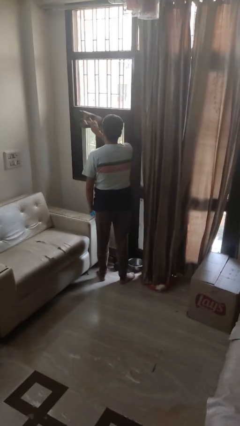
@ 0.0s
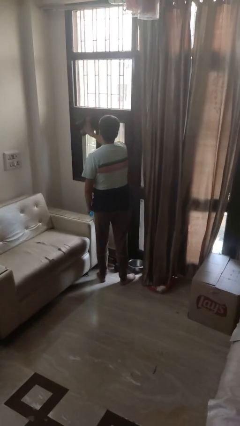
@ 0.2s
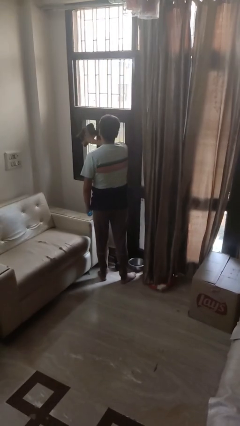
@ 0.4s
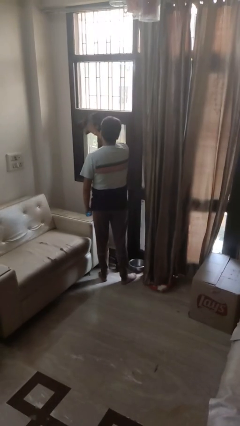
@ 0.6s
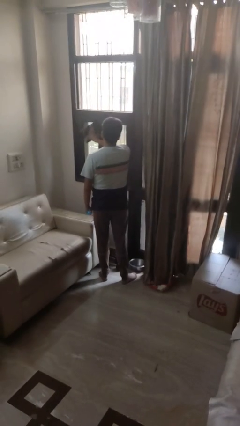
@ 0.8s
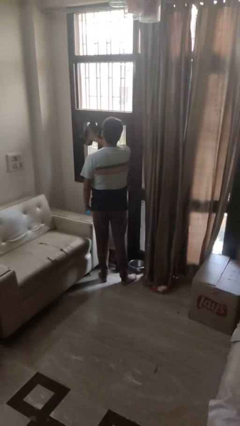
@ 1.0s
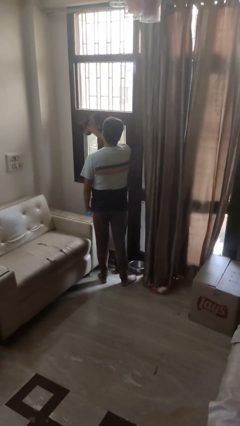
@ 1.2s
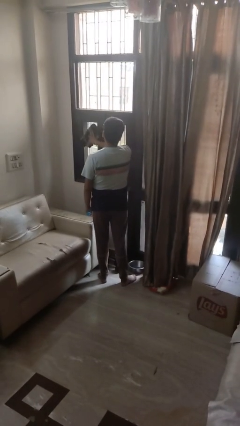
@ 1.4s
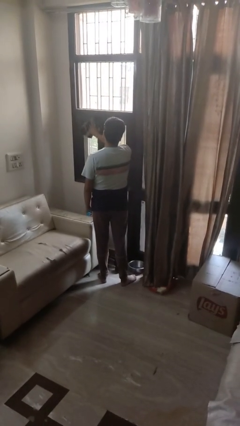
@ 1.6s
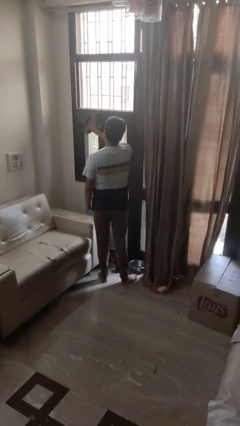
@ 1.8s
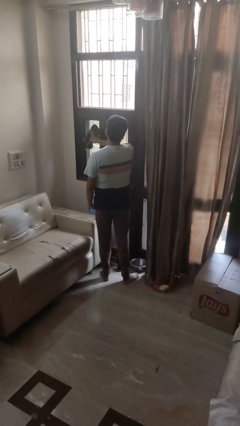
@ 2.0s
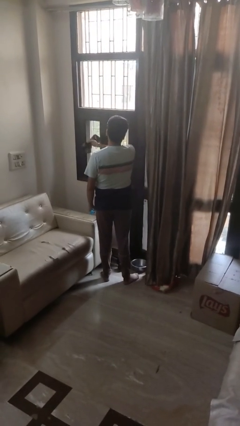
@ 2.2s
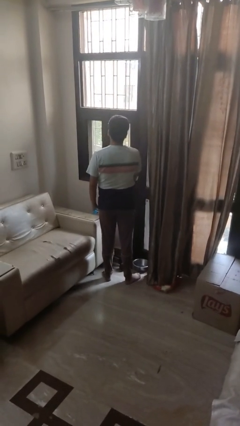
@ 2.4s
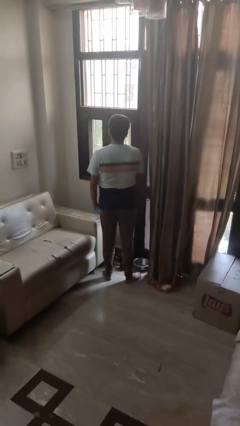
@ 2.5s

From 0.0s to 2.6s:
person washes window

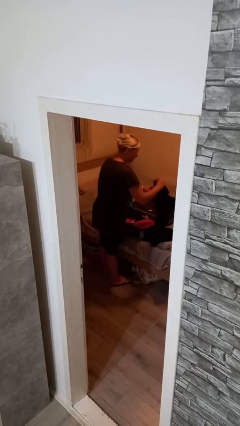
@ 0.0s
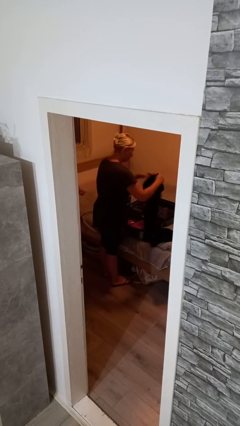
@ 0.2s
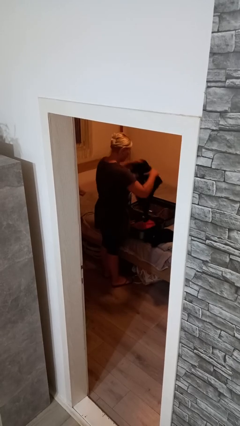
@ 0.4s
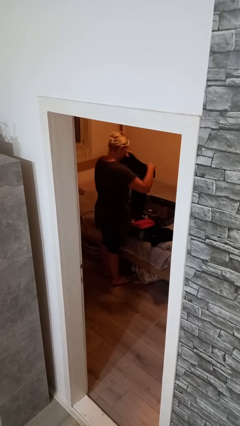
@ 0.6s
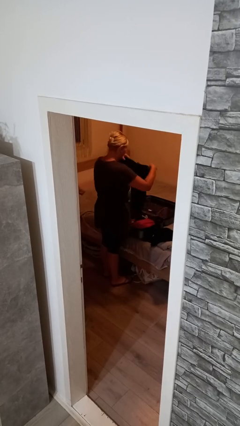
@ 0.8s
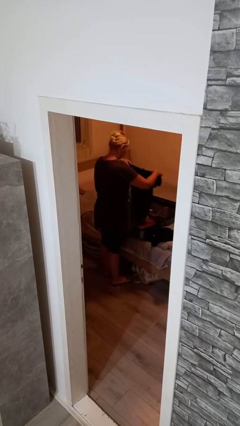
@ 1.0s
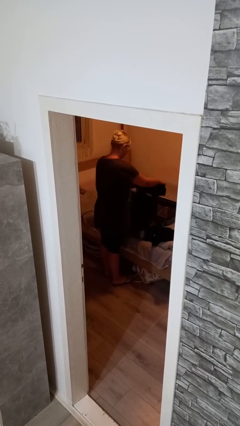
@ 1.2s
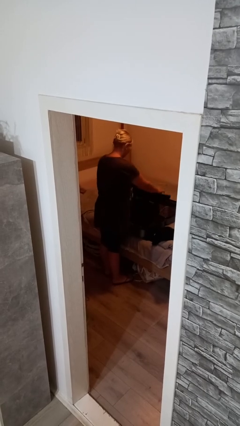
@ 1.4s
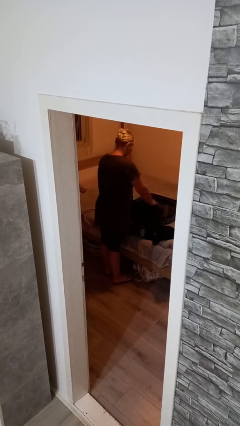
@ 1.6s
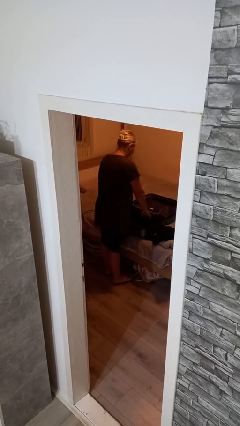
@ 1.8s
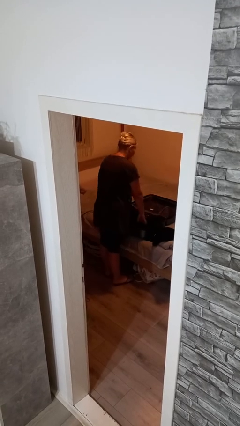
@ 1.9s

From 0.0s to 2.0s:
person loads clothes into suitcase

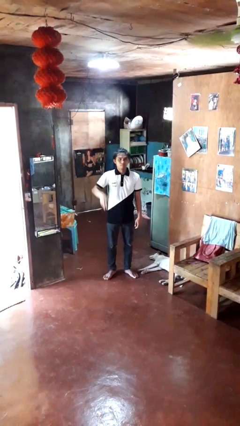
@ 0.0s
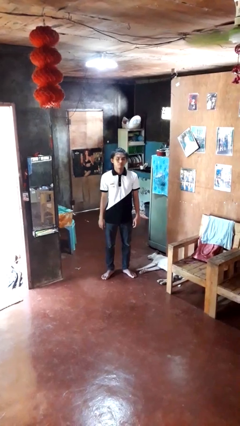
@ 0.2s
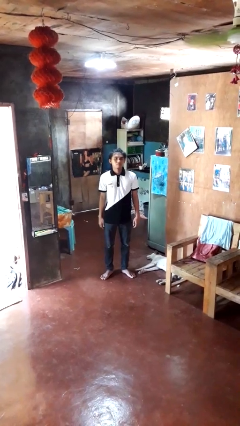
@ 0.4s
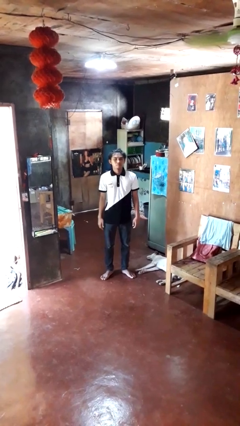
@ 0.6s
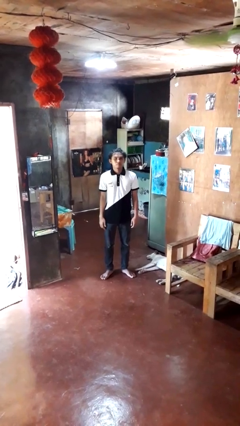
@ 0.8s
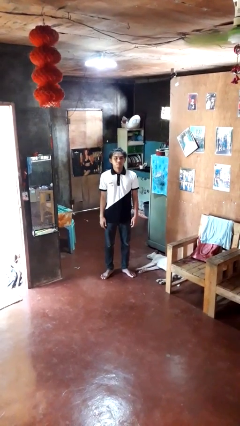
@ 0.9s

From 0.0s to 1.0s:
person gestures lower hand

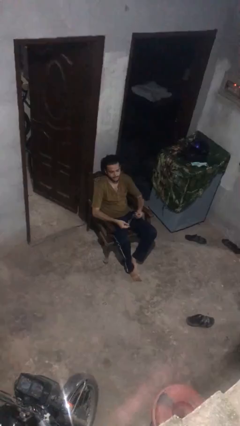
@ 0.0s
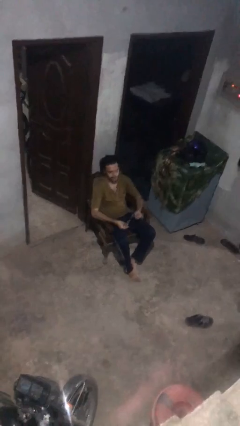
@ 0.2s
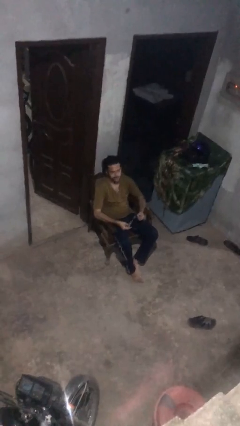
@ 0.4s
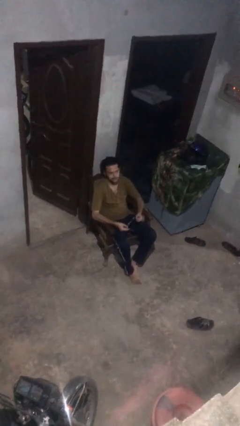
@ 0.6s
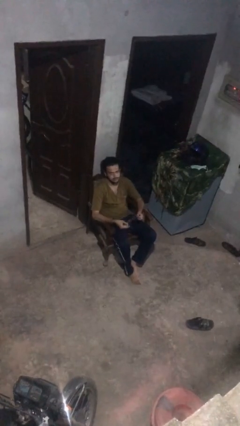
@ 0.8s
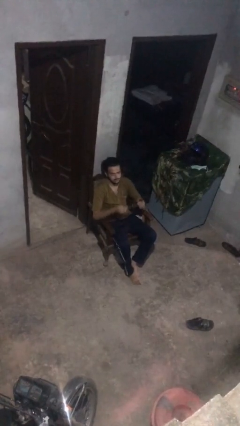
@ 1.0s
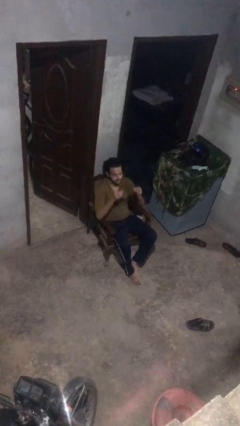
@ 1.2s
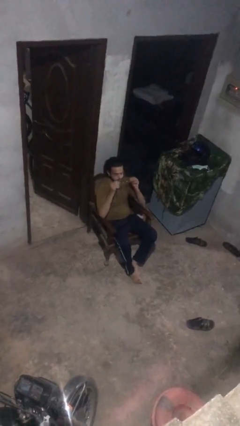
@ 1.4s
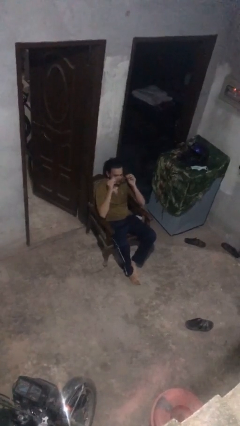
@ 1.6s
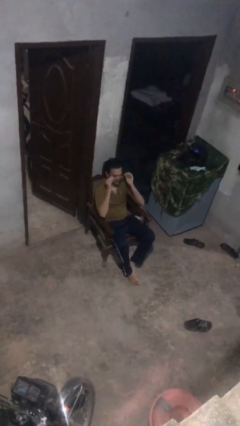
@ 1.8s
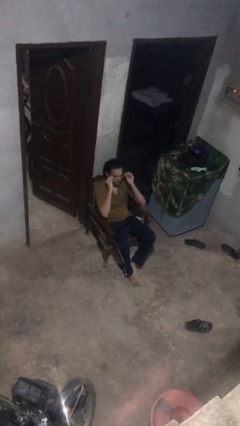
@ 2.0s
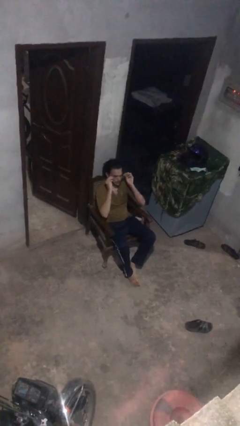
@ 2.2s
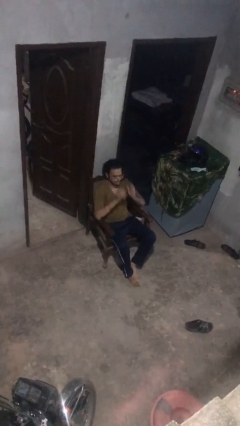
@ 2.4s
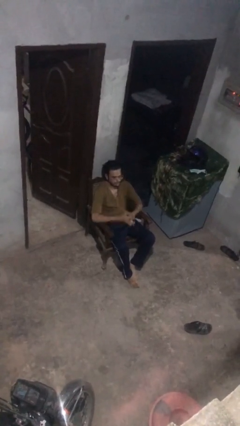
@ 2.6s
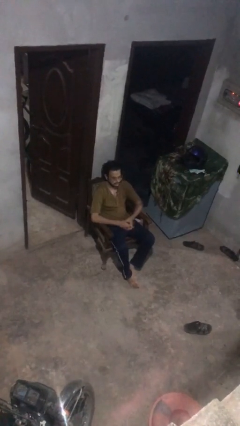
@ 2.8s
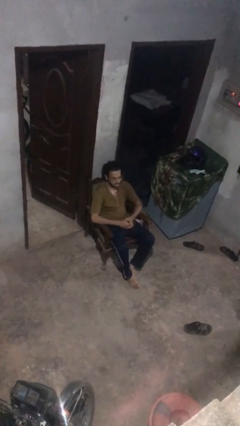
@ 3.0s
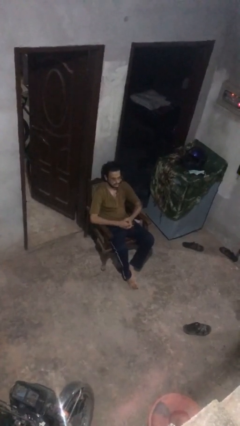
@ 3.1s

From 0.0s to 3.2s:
person puts on glasses

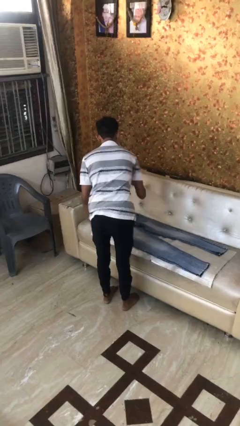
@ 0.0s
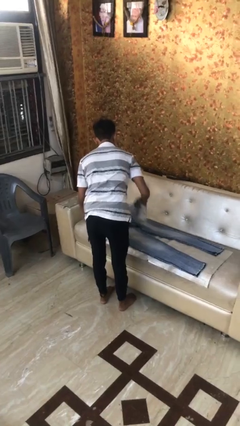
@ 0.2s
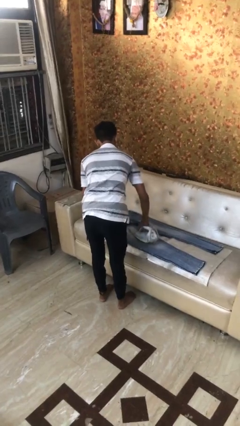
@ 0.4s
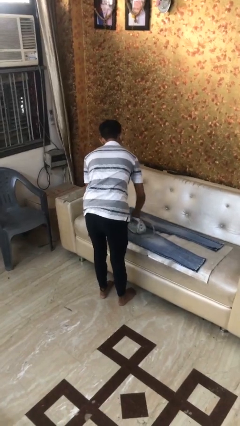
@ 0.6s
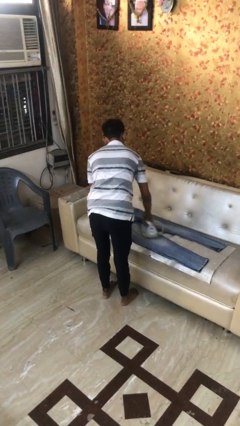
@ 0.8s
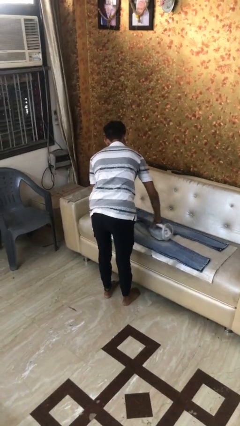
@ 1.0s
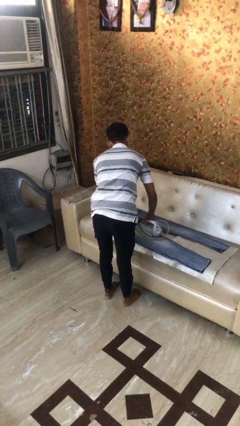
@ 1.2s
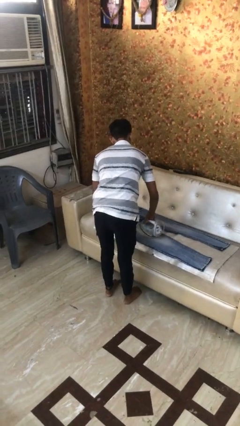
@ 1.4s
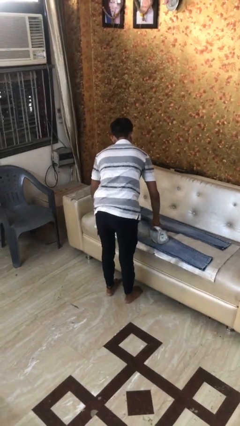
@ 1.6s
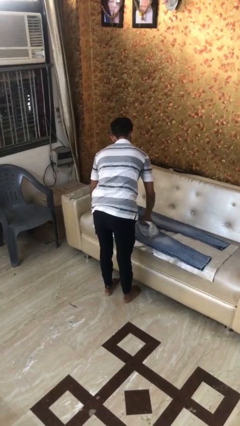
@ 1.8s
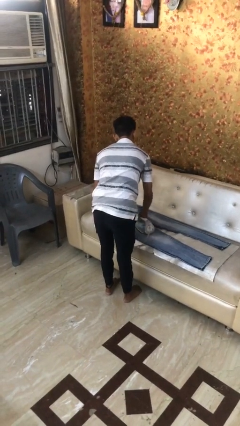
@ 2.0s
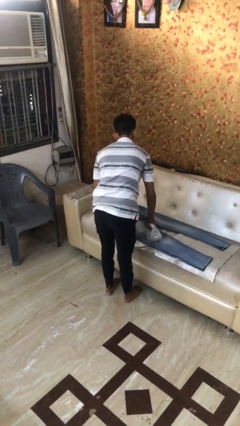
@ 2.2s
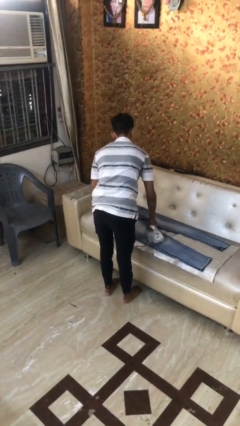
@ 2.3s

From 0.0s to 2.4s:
person irons clothes

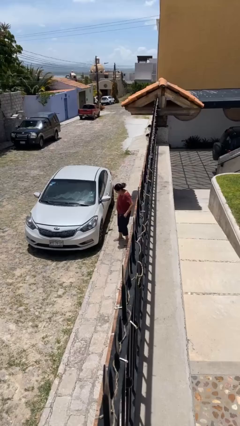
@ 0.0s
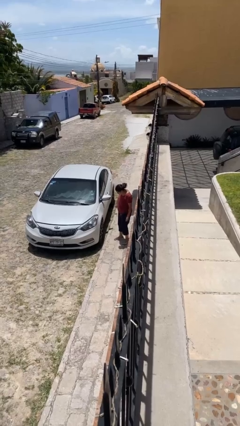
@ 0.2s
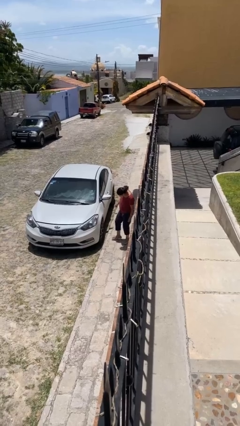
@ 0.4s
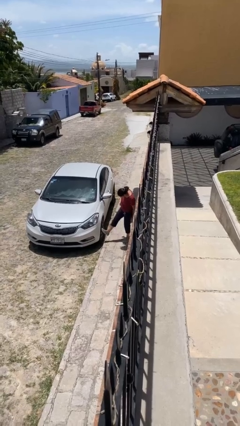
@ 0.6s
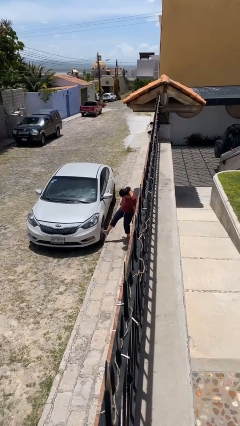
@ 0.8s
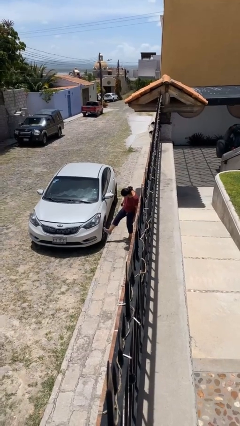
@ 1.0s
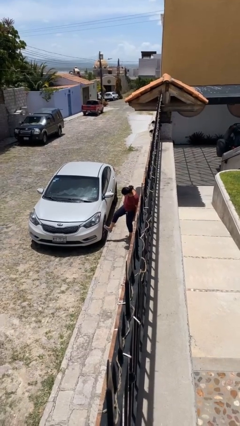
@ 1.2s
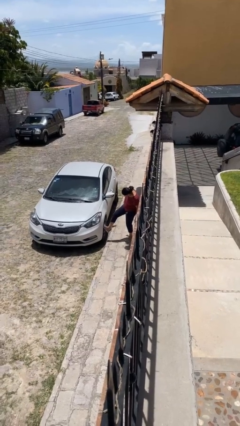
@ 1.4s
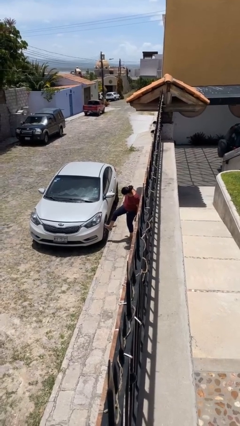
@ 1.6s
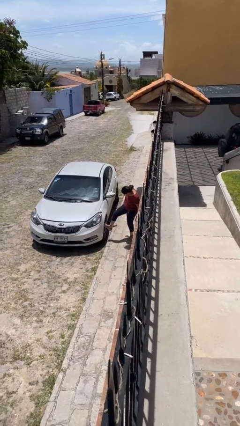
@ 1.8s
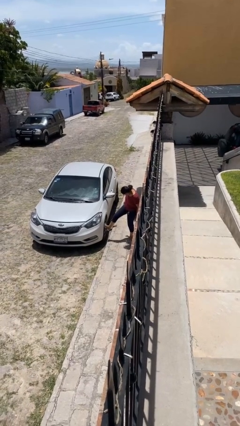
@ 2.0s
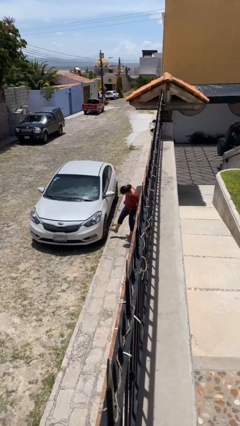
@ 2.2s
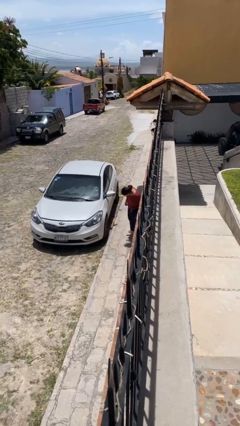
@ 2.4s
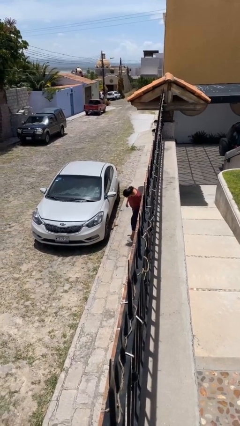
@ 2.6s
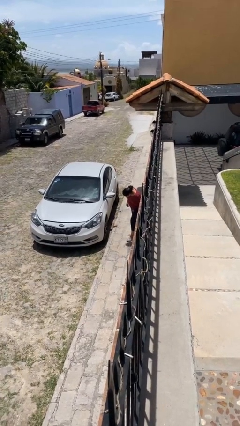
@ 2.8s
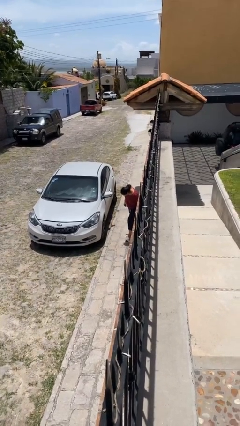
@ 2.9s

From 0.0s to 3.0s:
person kicks car tires

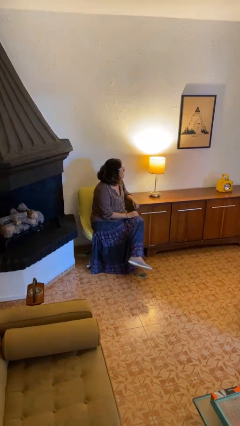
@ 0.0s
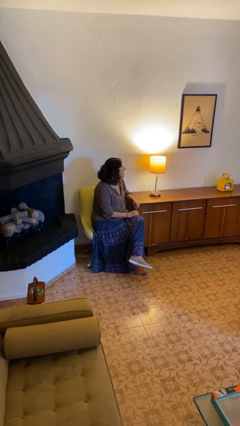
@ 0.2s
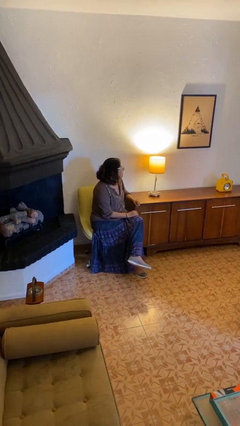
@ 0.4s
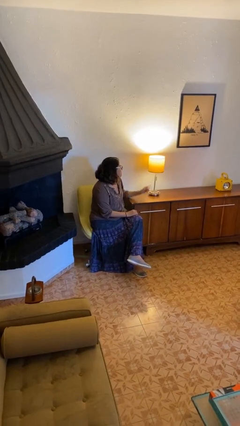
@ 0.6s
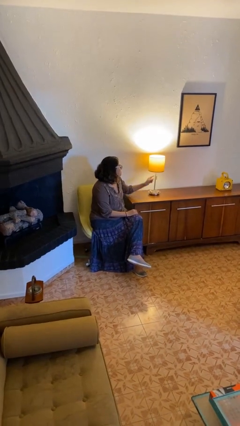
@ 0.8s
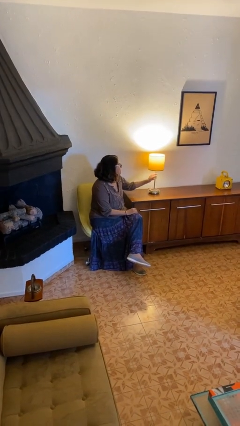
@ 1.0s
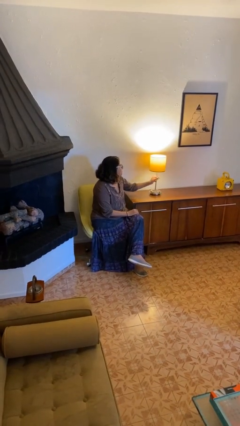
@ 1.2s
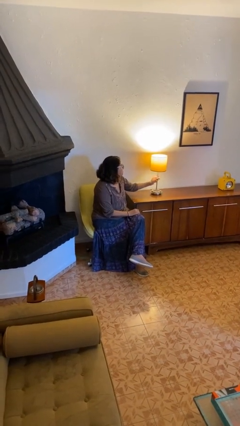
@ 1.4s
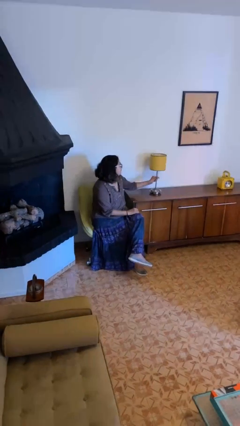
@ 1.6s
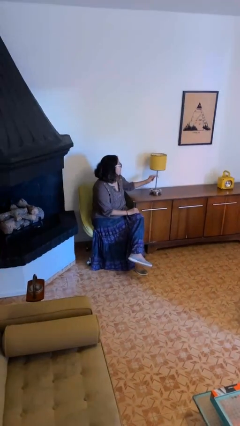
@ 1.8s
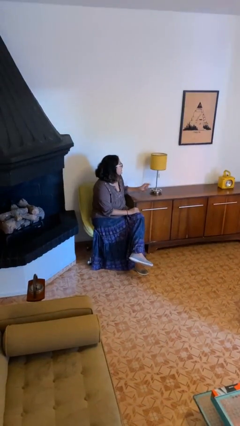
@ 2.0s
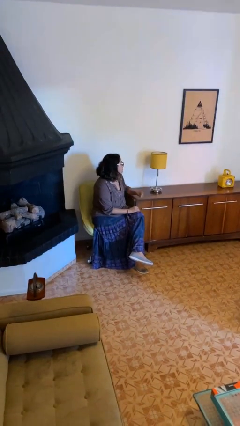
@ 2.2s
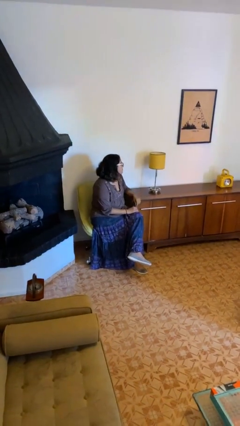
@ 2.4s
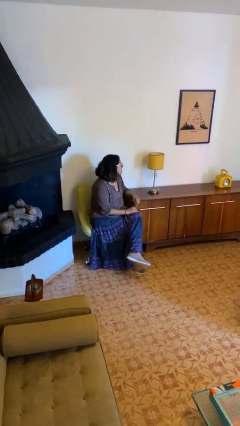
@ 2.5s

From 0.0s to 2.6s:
person turns off lamp
